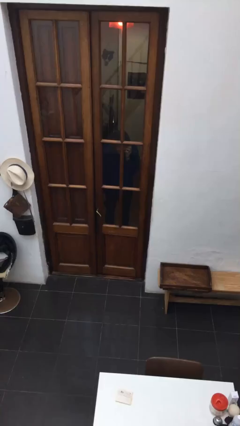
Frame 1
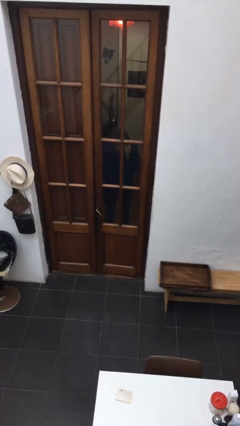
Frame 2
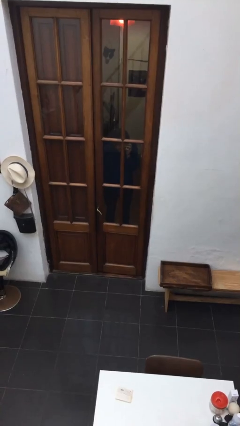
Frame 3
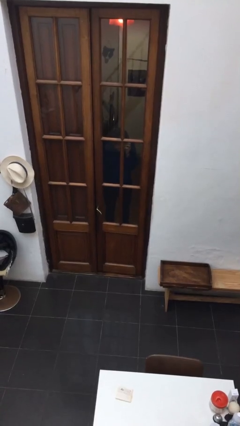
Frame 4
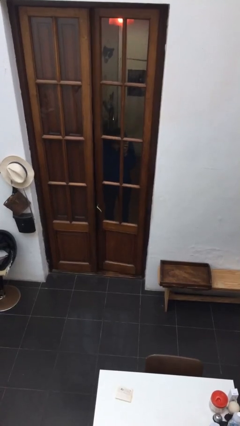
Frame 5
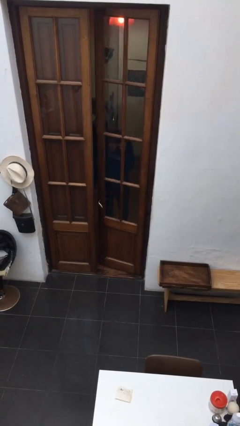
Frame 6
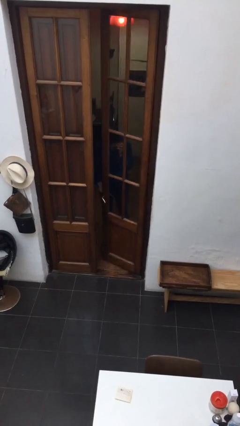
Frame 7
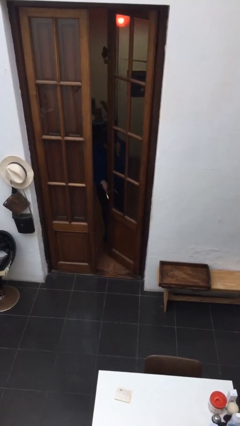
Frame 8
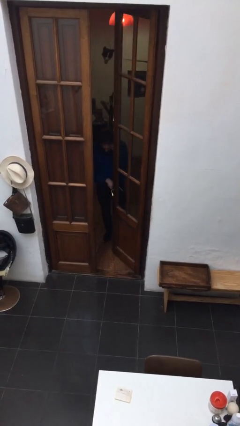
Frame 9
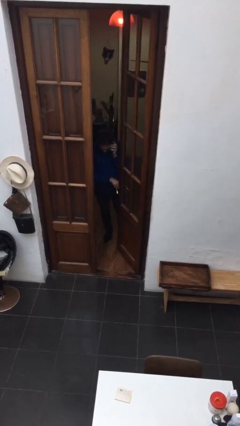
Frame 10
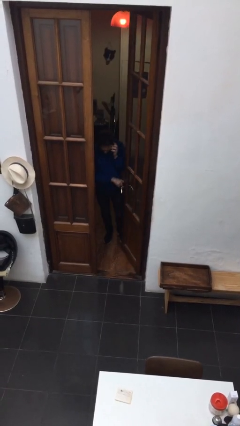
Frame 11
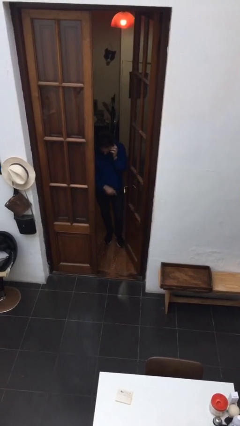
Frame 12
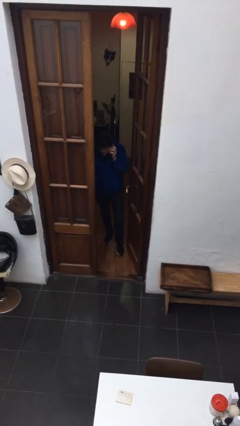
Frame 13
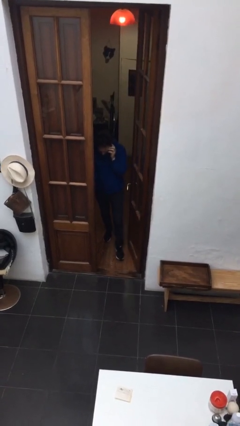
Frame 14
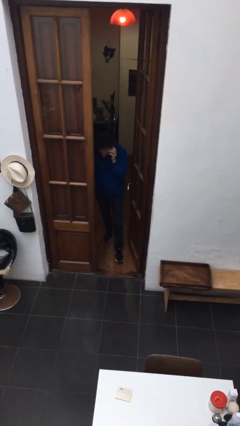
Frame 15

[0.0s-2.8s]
person opens facility door

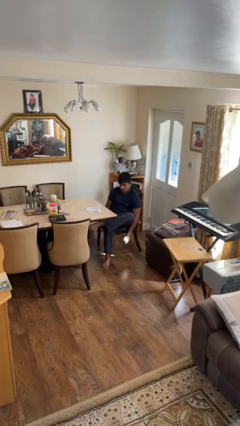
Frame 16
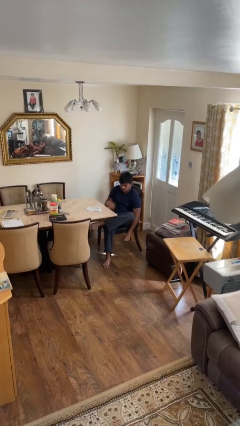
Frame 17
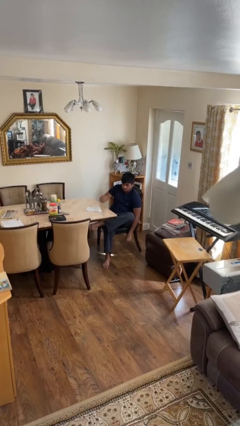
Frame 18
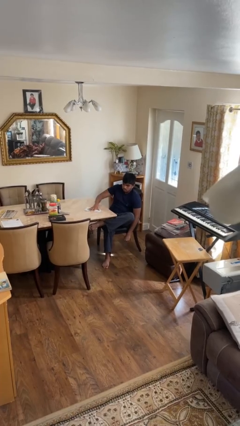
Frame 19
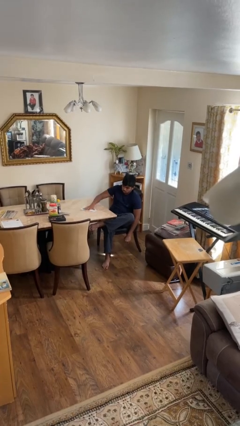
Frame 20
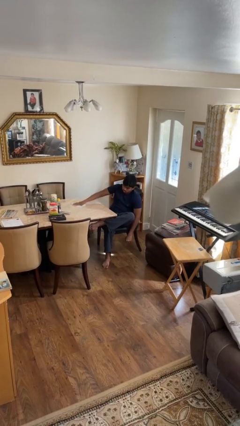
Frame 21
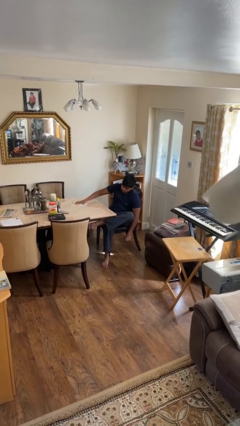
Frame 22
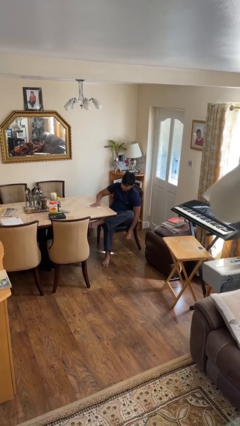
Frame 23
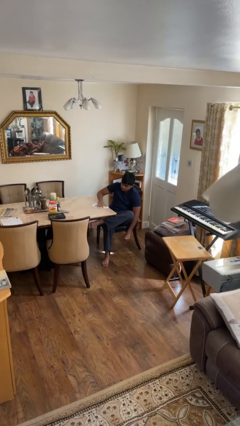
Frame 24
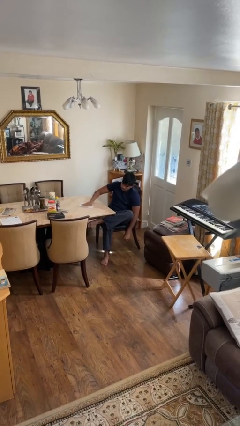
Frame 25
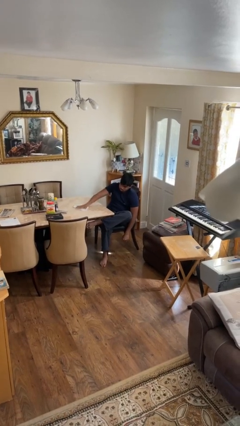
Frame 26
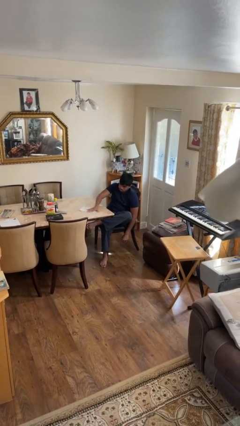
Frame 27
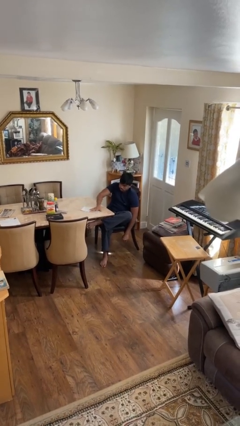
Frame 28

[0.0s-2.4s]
person cleans table with rag

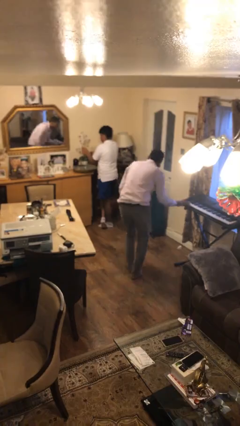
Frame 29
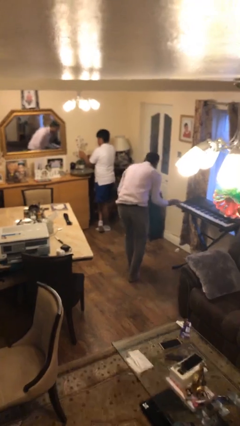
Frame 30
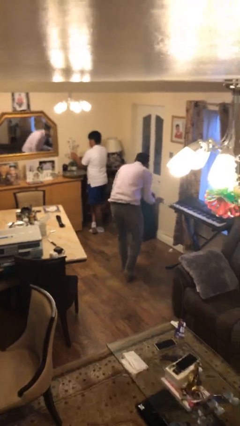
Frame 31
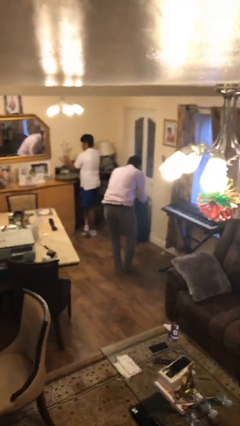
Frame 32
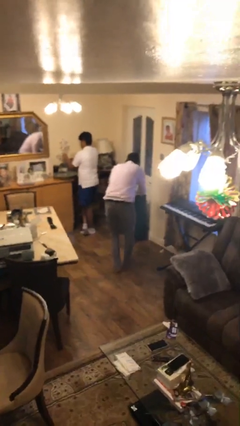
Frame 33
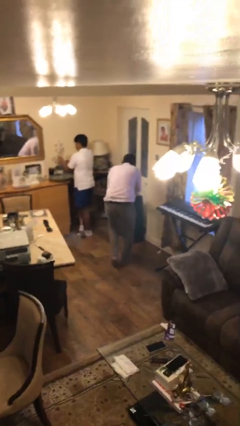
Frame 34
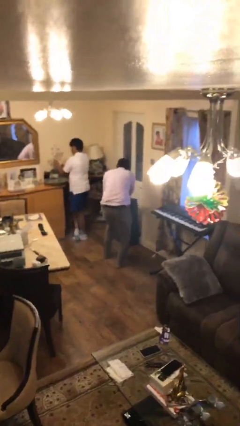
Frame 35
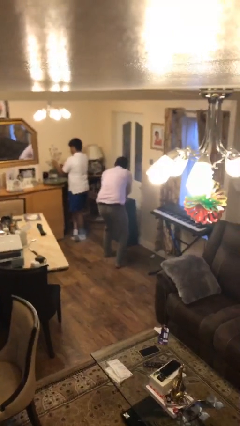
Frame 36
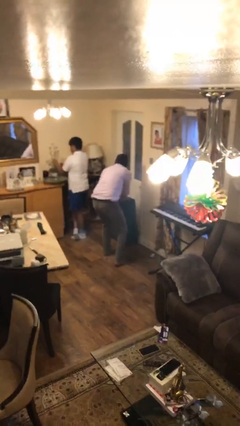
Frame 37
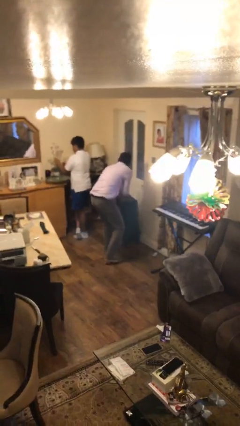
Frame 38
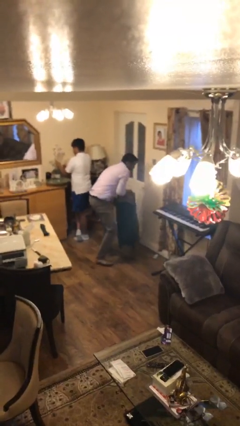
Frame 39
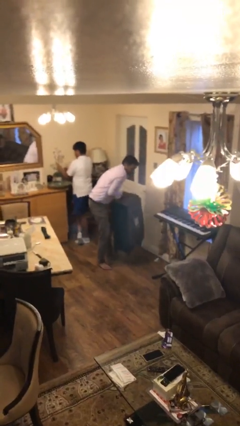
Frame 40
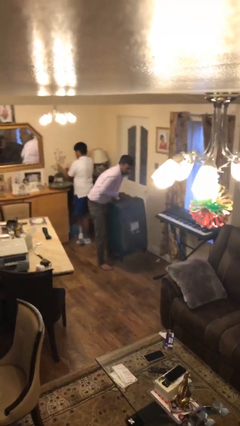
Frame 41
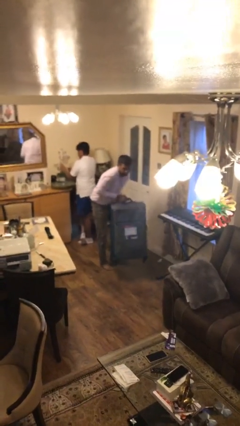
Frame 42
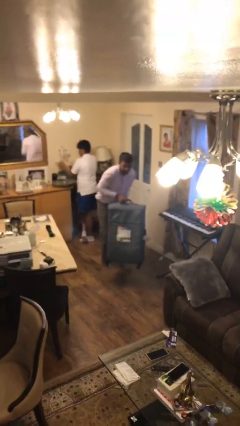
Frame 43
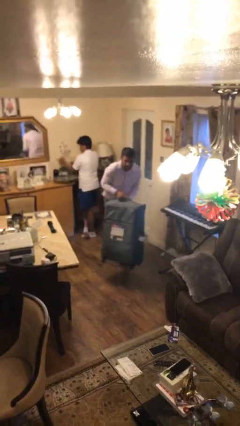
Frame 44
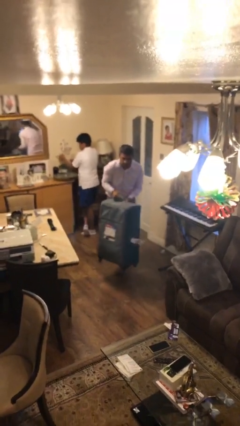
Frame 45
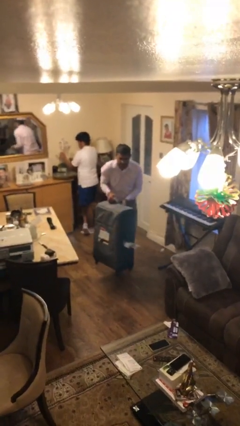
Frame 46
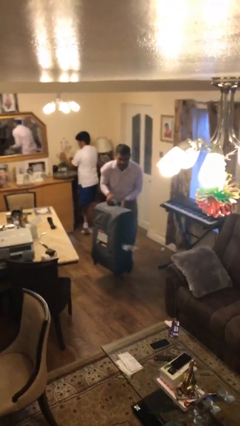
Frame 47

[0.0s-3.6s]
person steals object from person

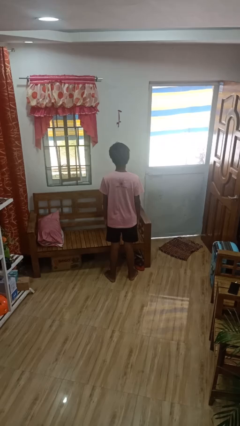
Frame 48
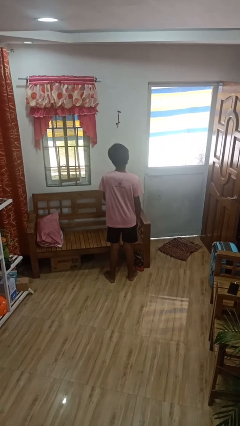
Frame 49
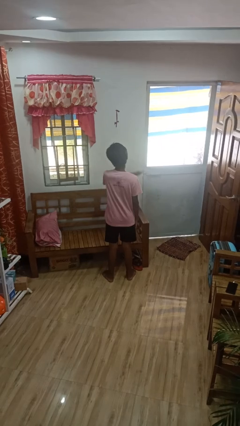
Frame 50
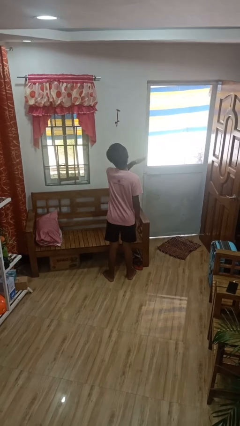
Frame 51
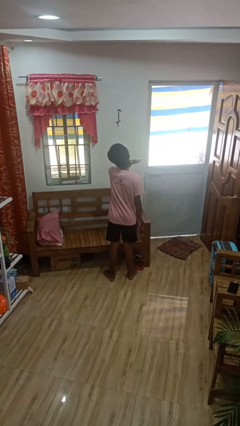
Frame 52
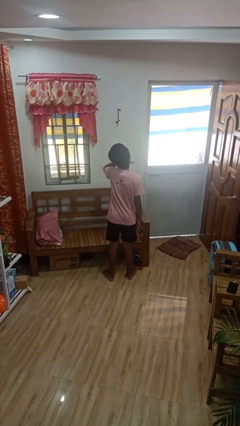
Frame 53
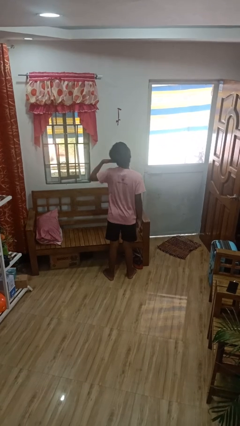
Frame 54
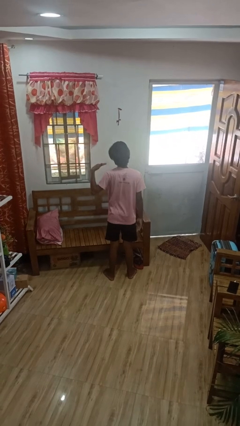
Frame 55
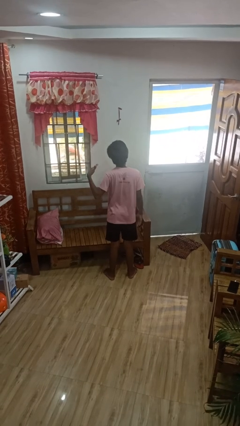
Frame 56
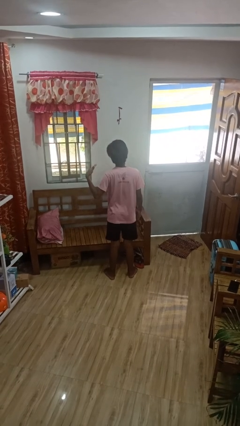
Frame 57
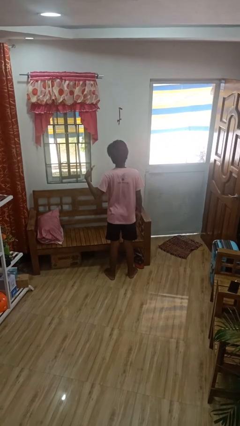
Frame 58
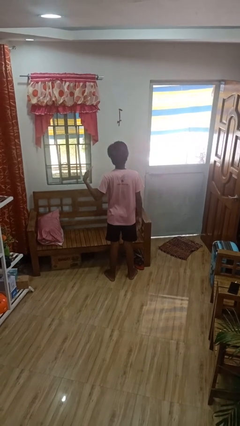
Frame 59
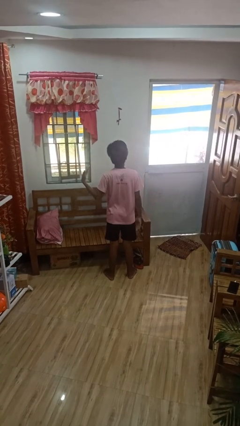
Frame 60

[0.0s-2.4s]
person gestures cut

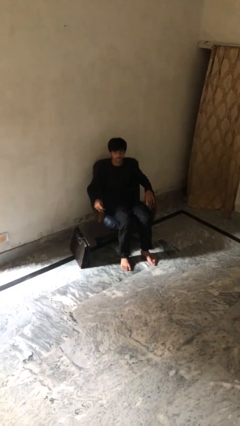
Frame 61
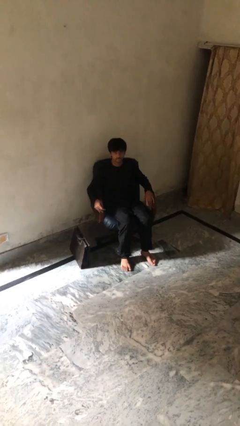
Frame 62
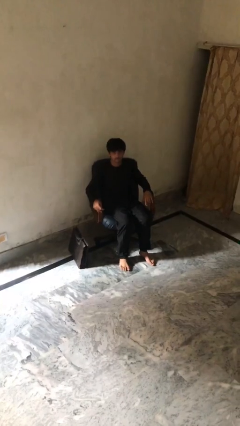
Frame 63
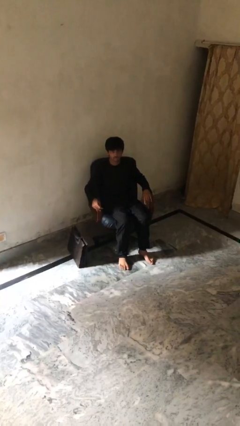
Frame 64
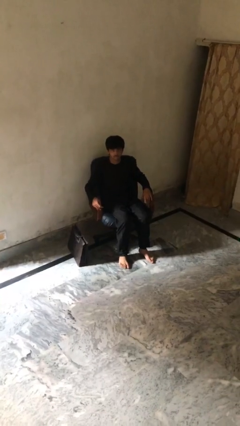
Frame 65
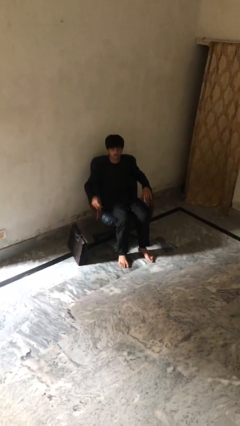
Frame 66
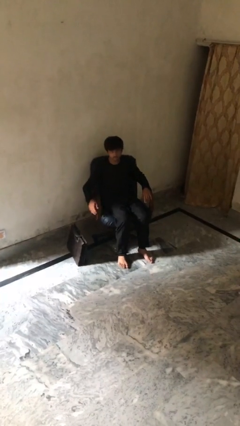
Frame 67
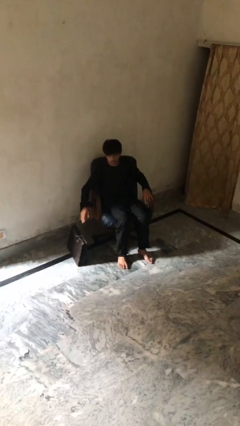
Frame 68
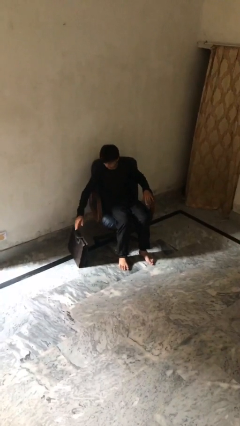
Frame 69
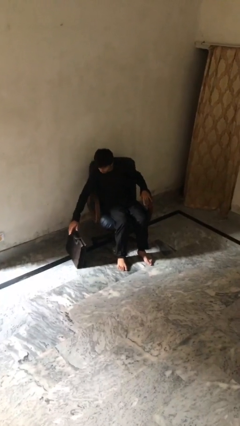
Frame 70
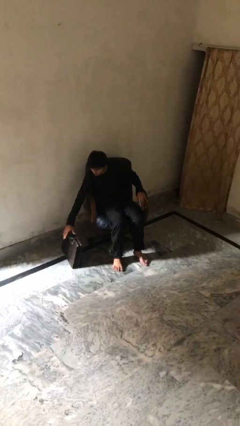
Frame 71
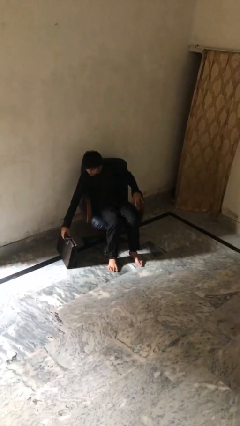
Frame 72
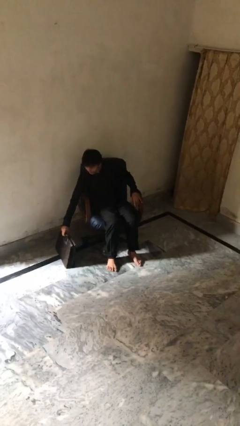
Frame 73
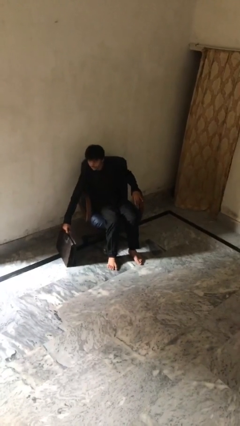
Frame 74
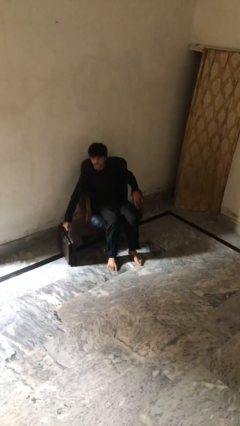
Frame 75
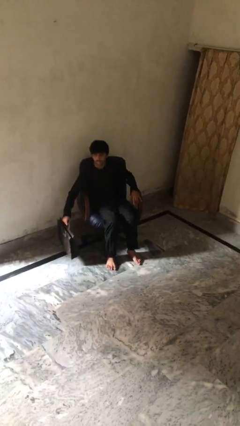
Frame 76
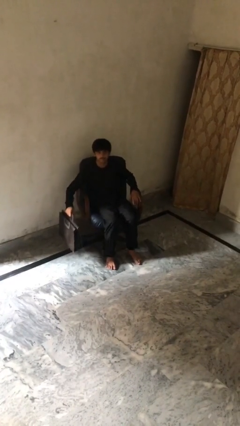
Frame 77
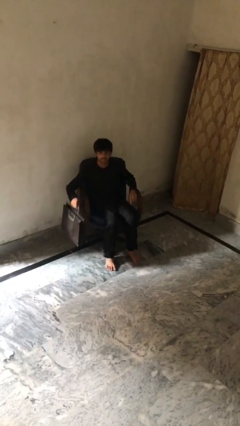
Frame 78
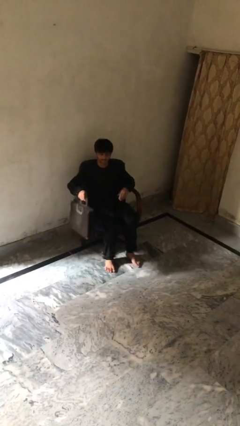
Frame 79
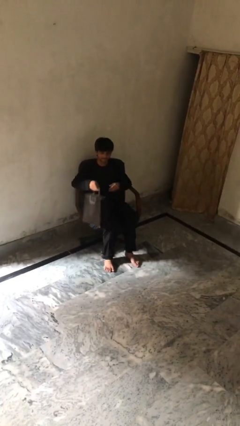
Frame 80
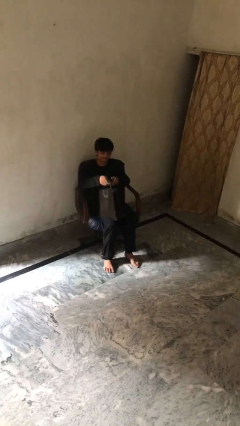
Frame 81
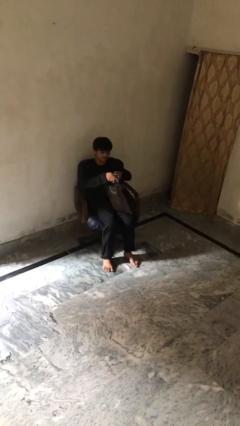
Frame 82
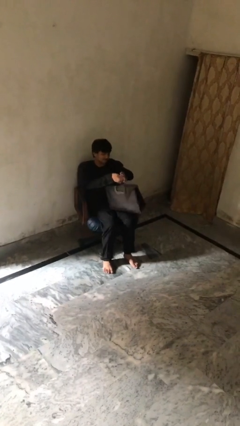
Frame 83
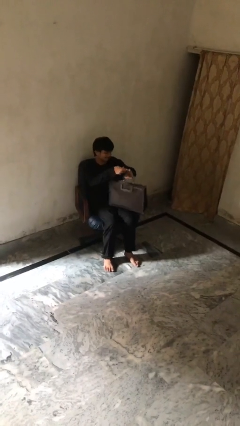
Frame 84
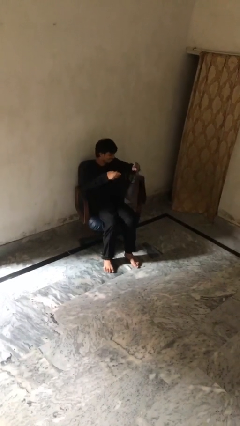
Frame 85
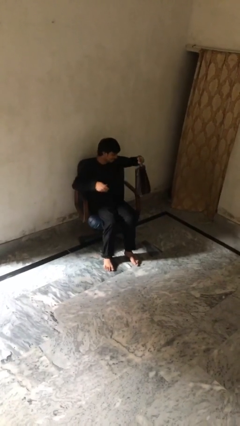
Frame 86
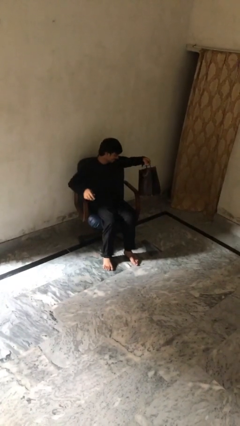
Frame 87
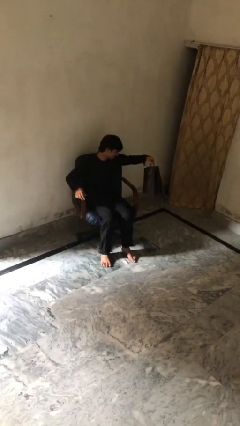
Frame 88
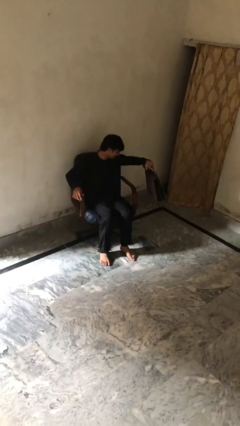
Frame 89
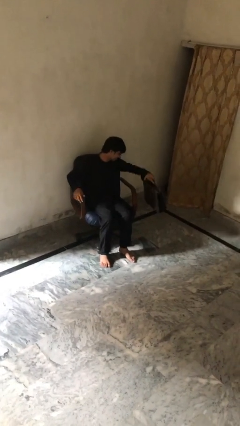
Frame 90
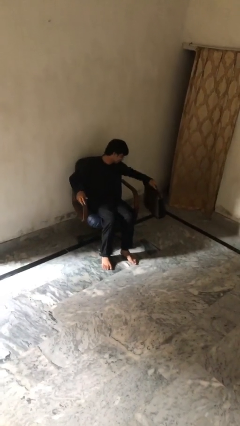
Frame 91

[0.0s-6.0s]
person picks up object from floor

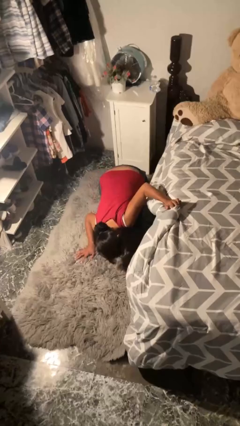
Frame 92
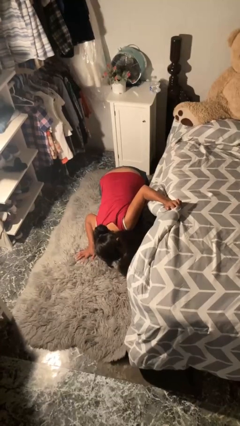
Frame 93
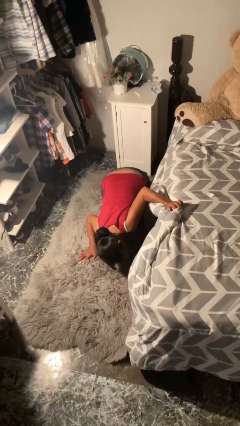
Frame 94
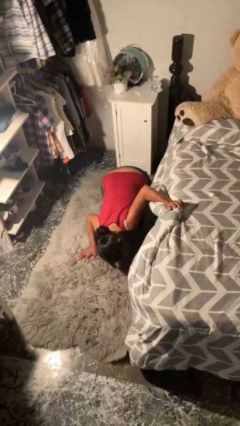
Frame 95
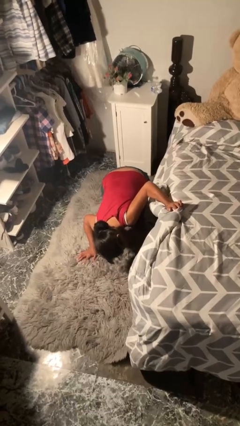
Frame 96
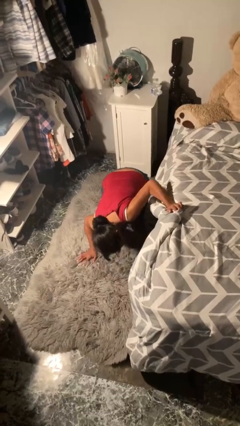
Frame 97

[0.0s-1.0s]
person searches under bed
